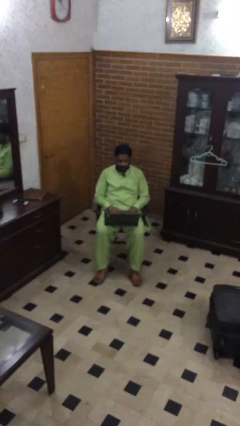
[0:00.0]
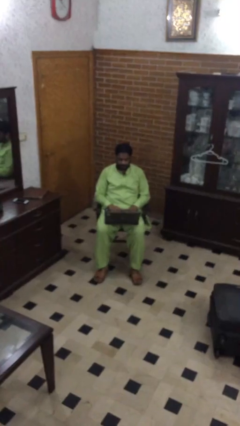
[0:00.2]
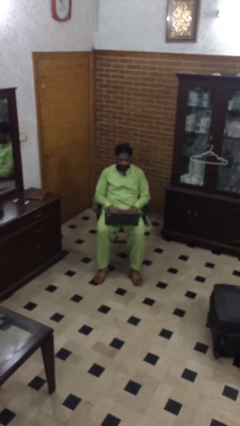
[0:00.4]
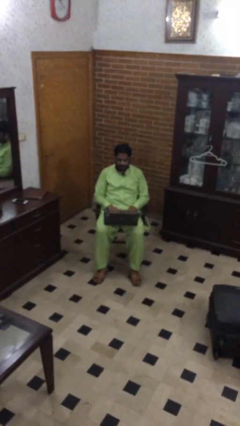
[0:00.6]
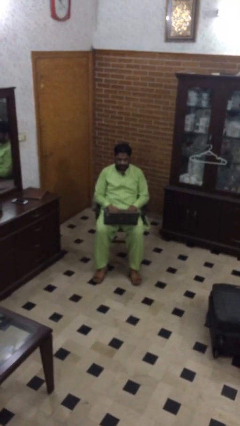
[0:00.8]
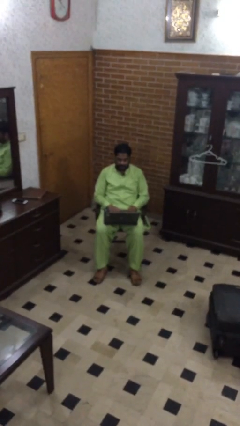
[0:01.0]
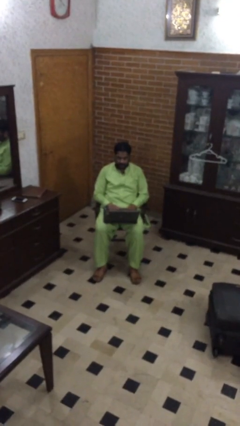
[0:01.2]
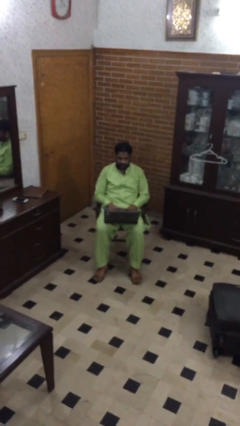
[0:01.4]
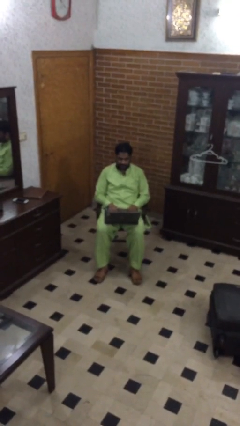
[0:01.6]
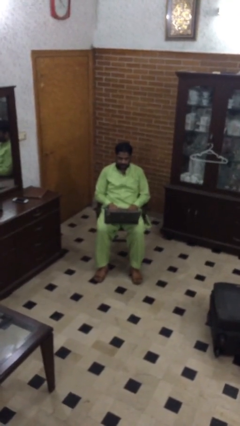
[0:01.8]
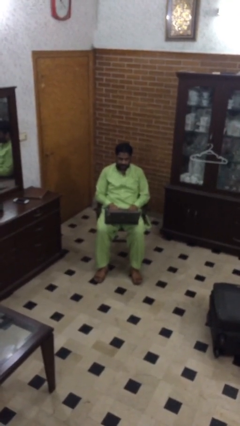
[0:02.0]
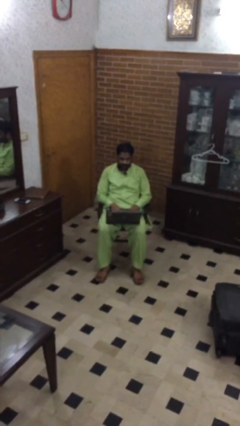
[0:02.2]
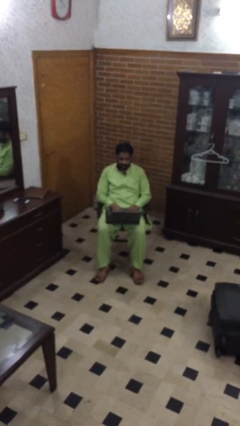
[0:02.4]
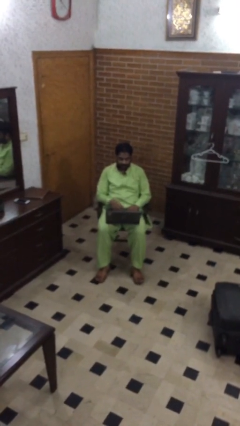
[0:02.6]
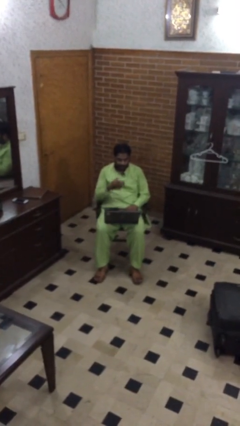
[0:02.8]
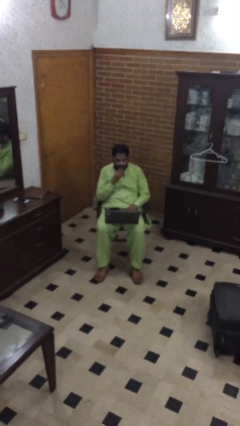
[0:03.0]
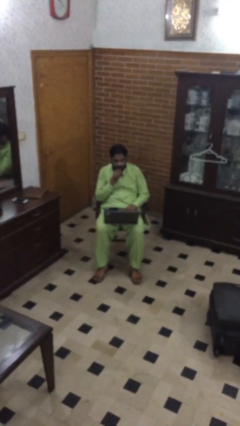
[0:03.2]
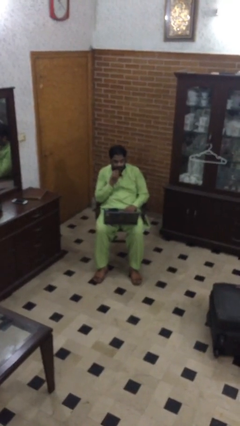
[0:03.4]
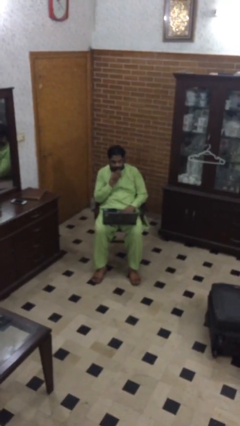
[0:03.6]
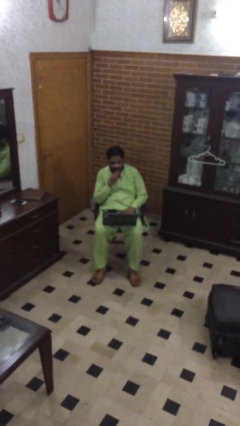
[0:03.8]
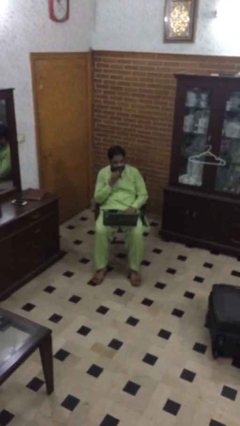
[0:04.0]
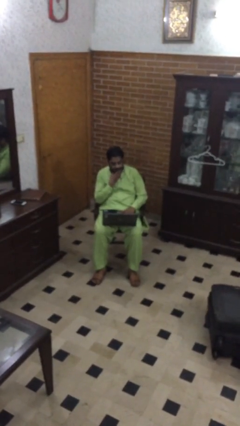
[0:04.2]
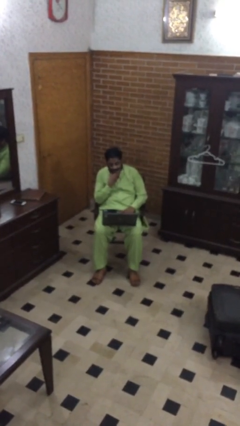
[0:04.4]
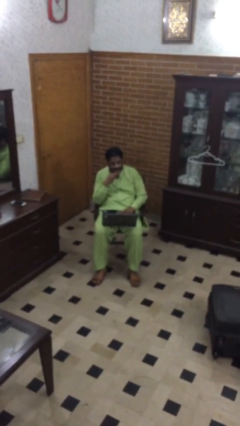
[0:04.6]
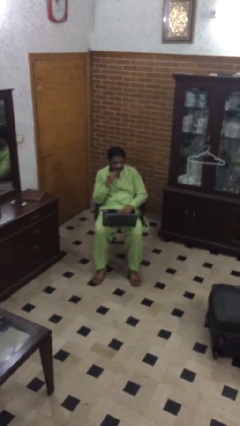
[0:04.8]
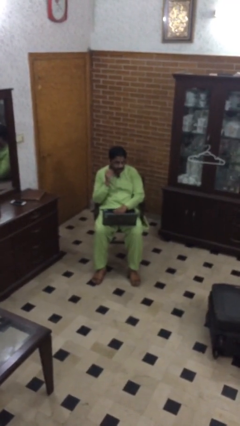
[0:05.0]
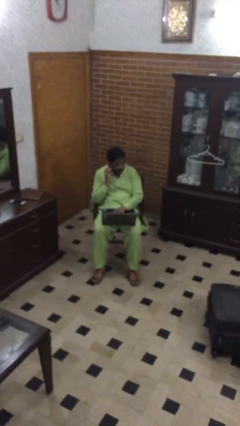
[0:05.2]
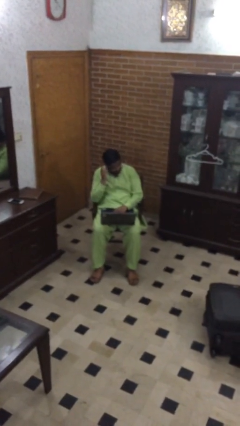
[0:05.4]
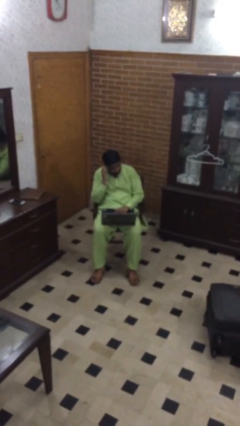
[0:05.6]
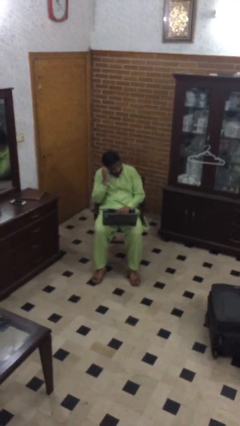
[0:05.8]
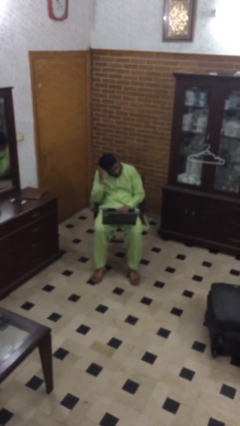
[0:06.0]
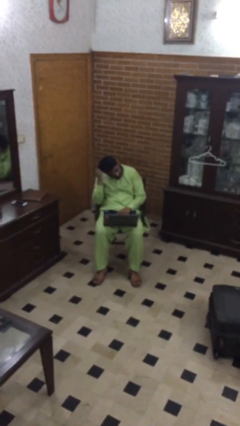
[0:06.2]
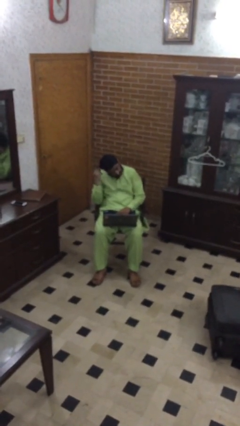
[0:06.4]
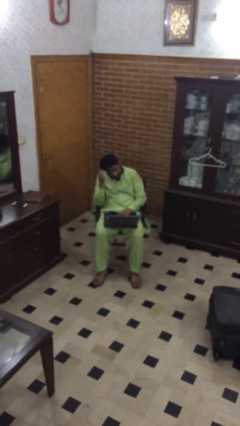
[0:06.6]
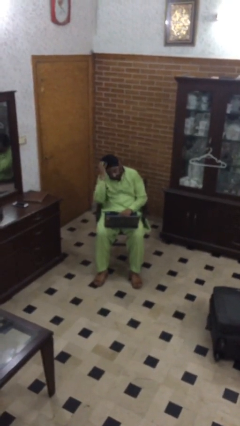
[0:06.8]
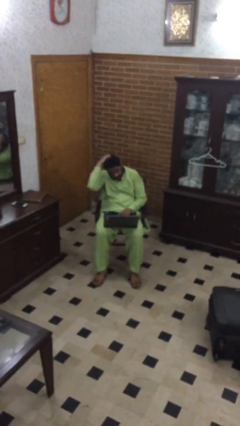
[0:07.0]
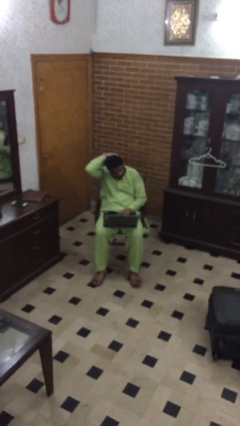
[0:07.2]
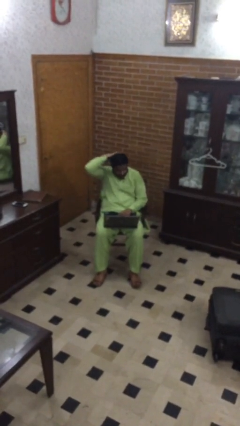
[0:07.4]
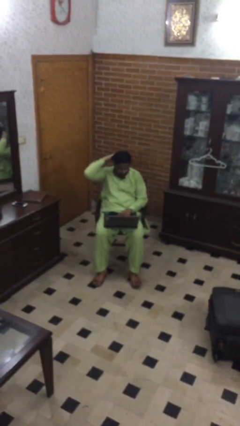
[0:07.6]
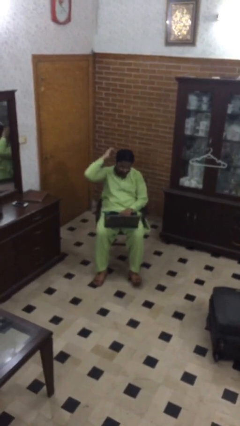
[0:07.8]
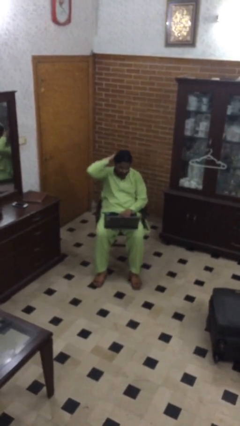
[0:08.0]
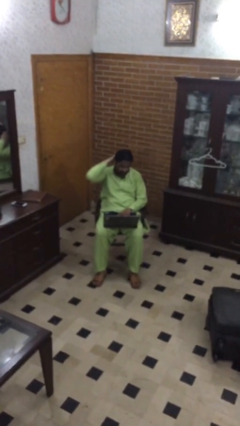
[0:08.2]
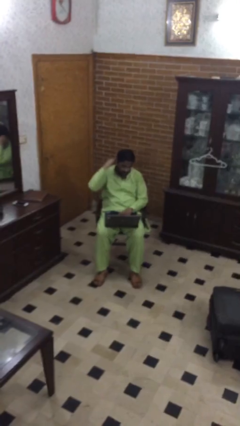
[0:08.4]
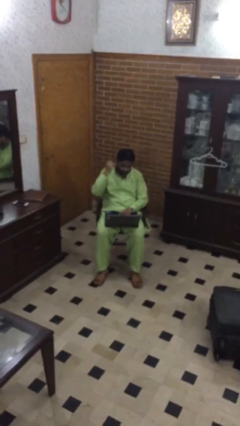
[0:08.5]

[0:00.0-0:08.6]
person interacts with laptop

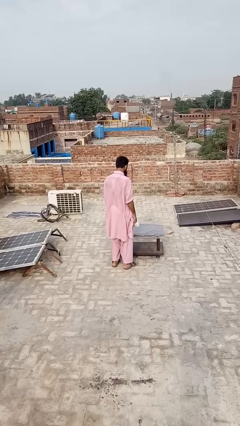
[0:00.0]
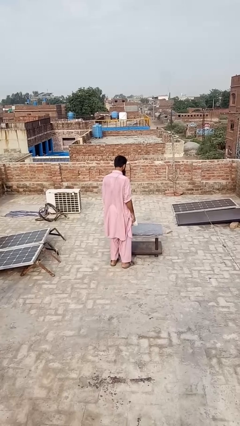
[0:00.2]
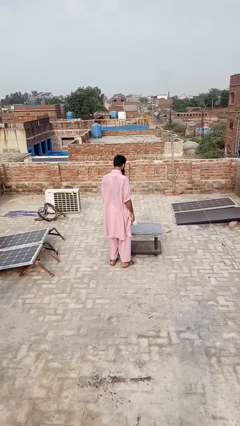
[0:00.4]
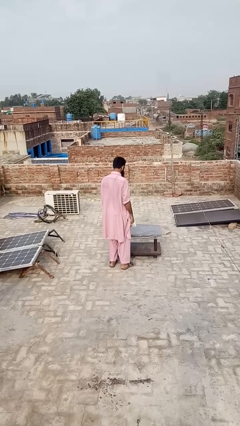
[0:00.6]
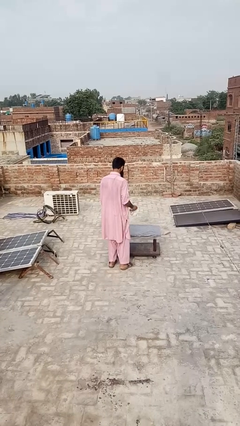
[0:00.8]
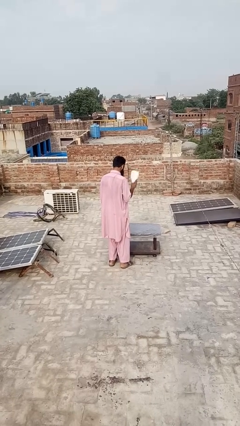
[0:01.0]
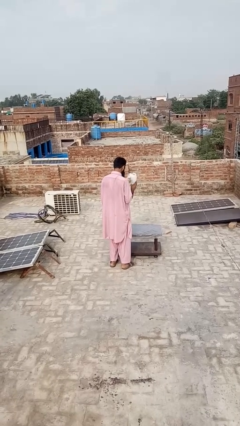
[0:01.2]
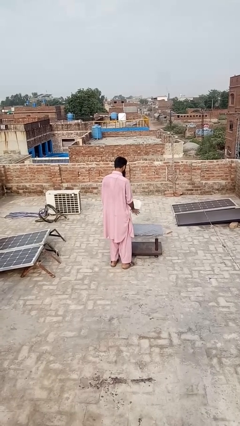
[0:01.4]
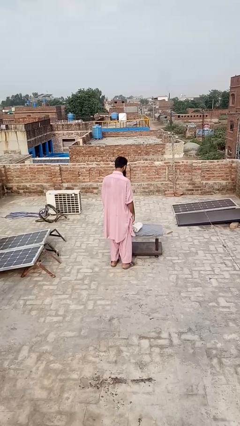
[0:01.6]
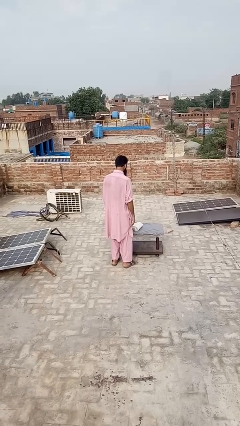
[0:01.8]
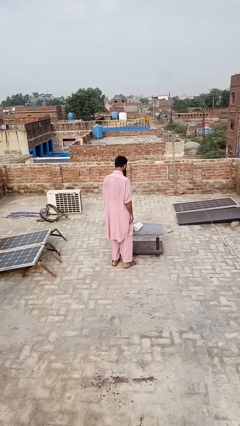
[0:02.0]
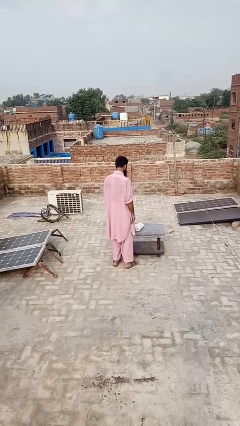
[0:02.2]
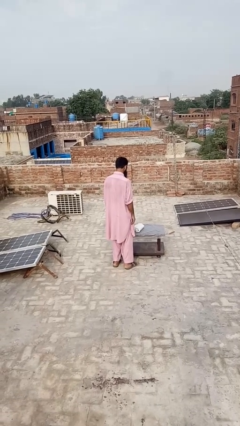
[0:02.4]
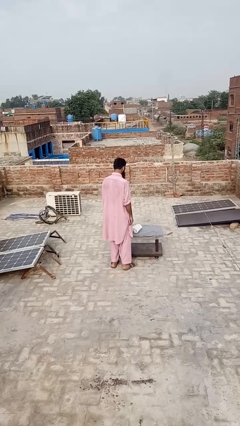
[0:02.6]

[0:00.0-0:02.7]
person throws object on table

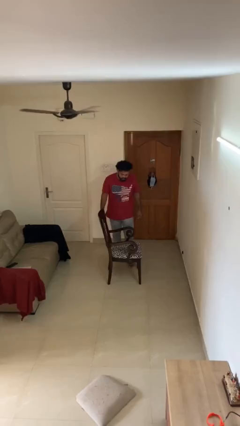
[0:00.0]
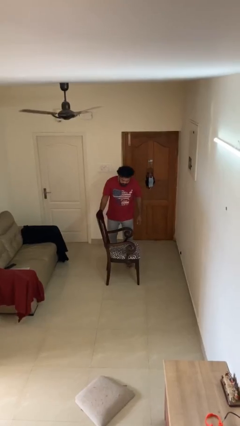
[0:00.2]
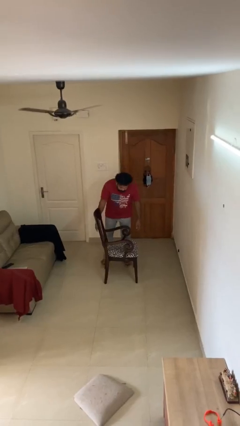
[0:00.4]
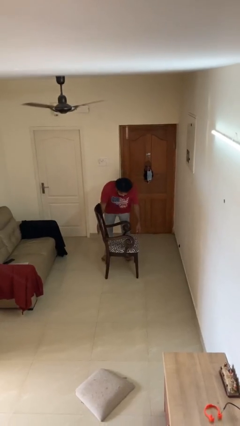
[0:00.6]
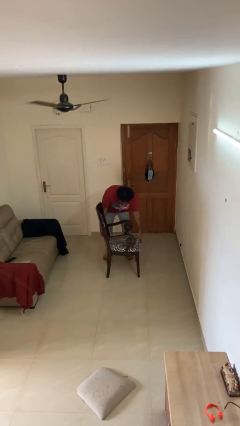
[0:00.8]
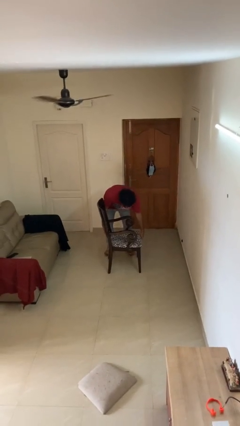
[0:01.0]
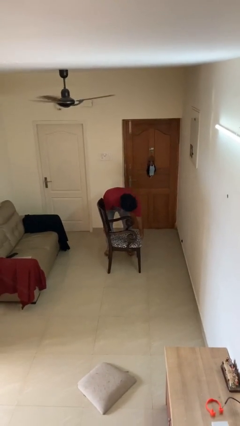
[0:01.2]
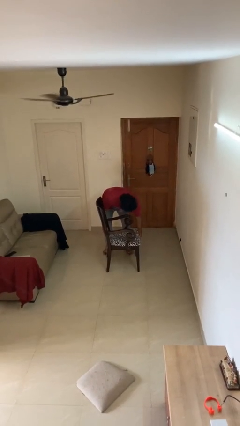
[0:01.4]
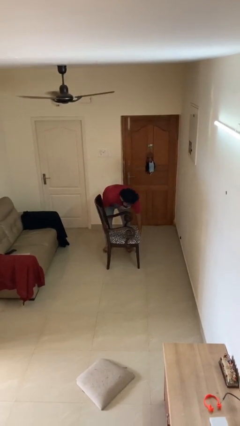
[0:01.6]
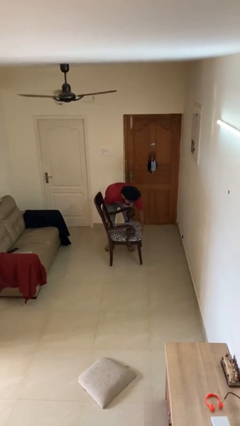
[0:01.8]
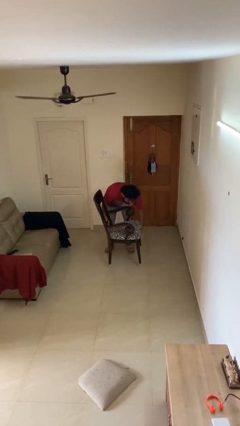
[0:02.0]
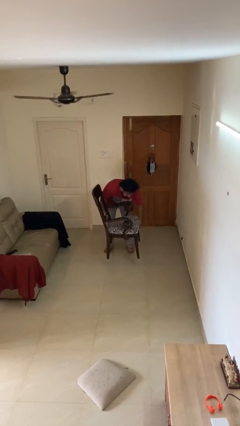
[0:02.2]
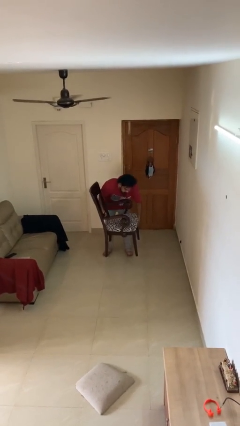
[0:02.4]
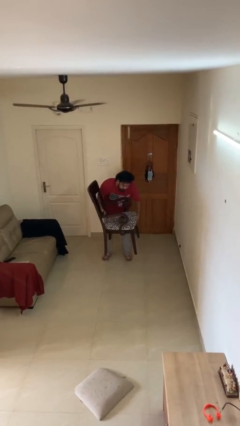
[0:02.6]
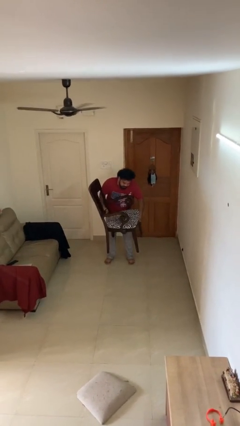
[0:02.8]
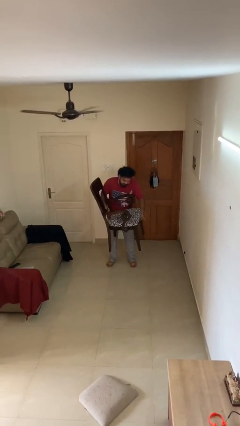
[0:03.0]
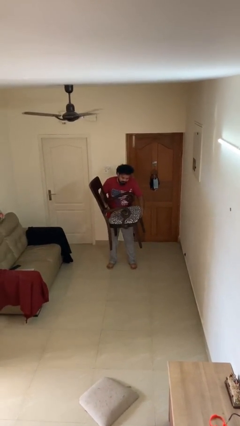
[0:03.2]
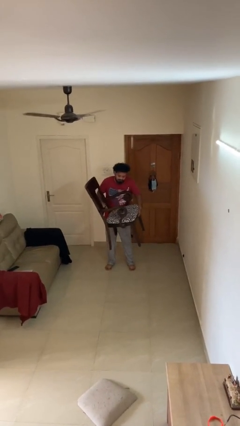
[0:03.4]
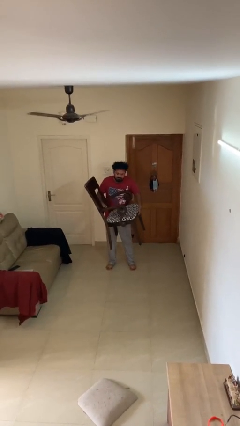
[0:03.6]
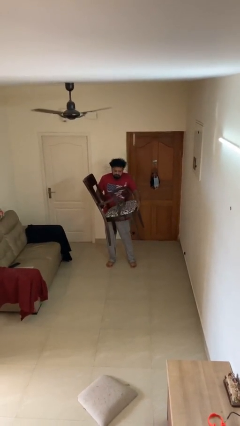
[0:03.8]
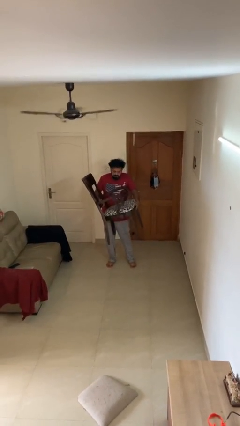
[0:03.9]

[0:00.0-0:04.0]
person picks up object from floor

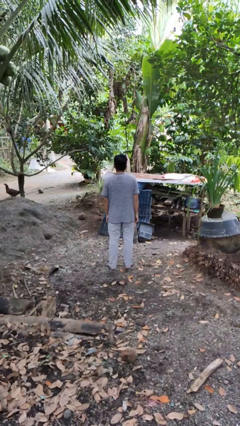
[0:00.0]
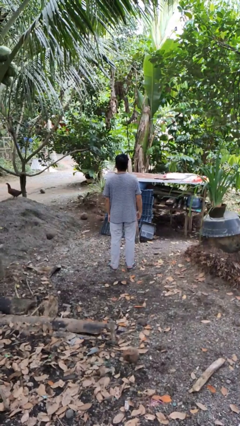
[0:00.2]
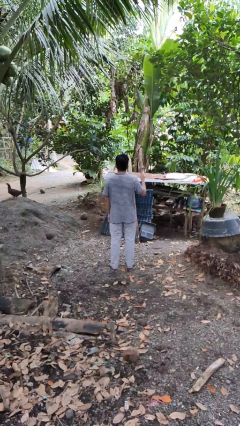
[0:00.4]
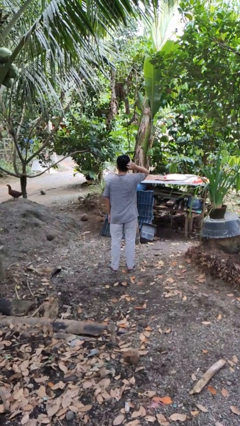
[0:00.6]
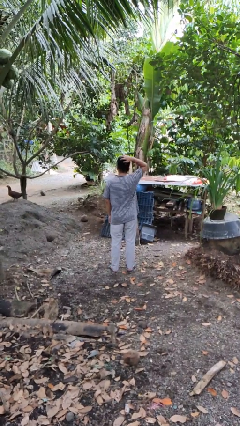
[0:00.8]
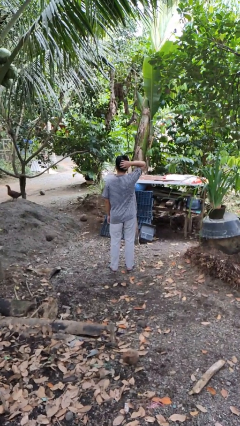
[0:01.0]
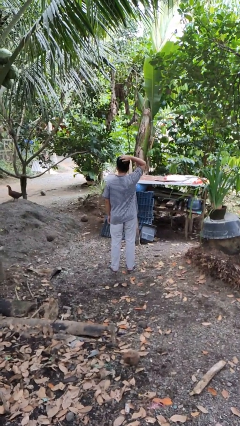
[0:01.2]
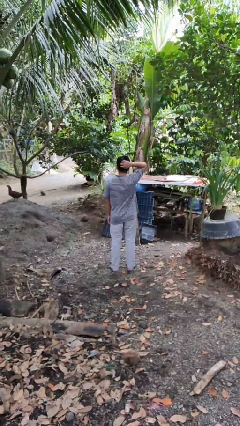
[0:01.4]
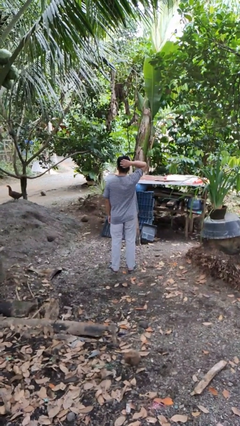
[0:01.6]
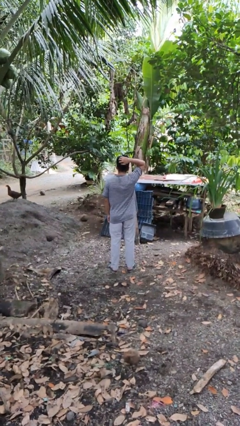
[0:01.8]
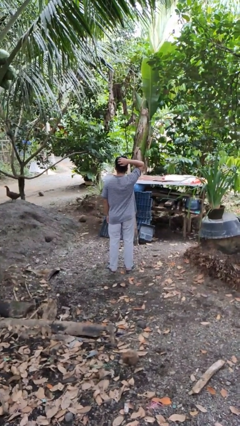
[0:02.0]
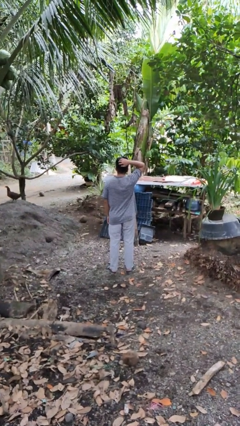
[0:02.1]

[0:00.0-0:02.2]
person scratches face

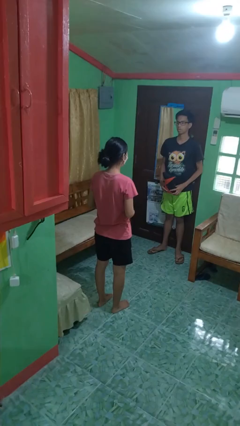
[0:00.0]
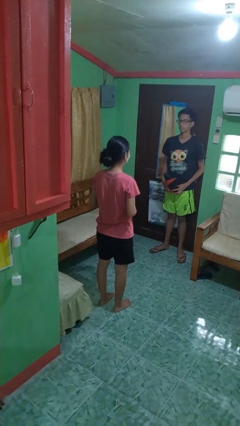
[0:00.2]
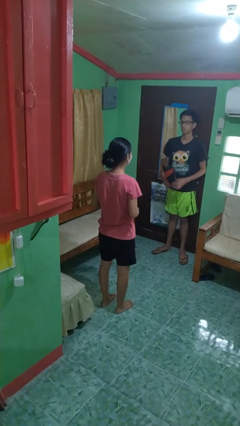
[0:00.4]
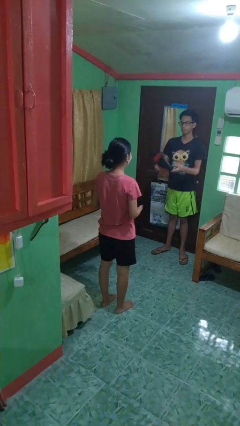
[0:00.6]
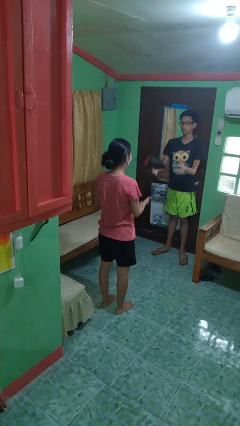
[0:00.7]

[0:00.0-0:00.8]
person catches object from person
